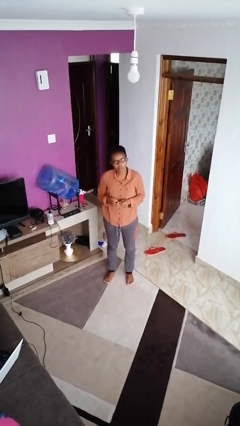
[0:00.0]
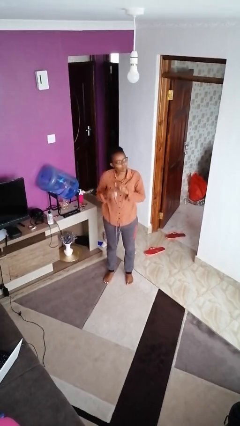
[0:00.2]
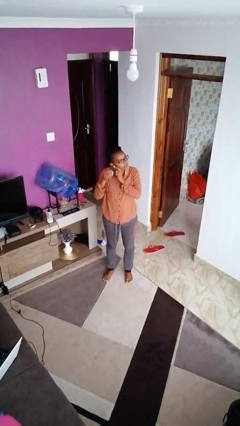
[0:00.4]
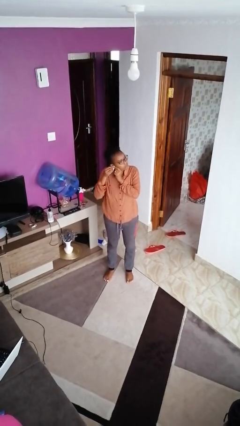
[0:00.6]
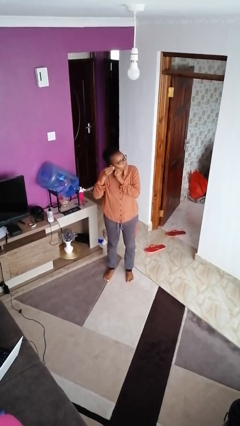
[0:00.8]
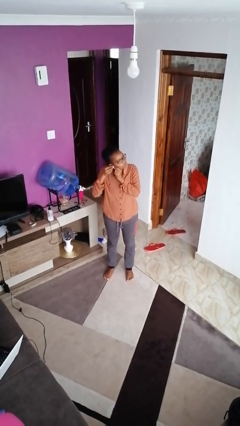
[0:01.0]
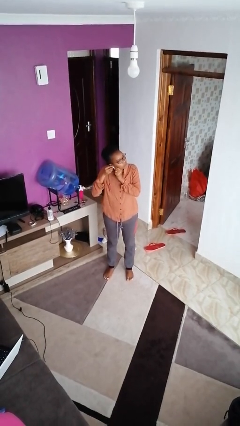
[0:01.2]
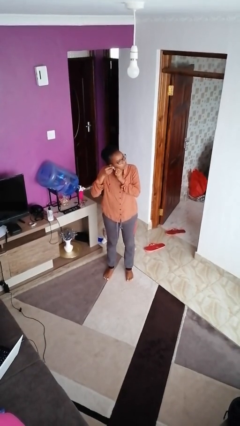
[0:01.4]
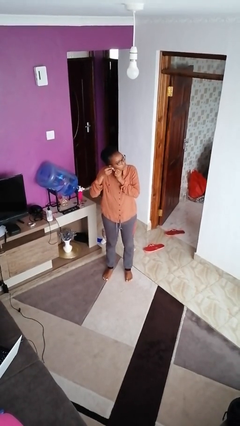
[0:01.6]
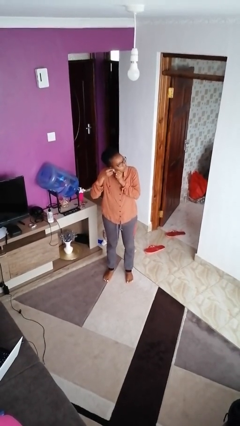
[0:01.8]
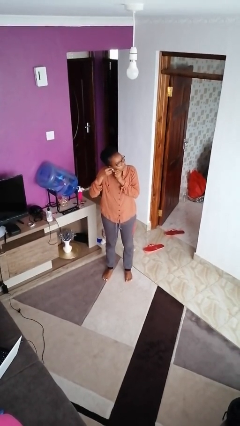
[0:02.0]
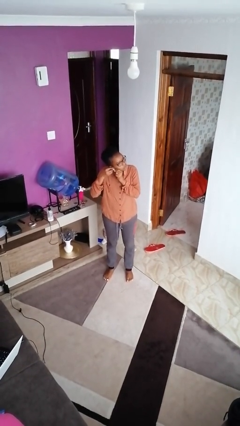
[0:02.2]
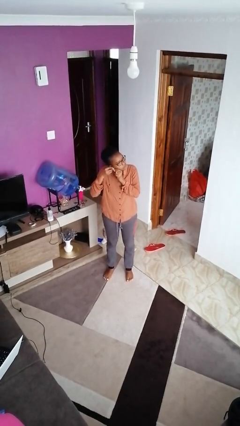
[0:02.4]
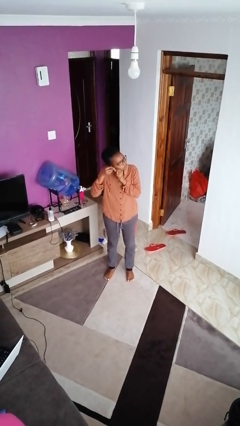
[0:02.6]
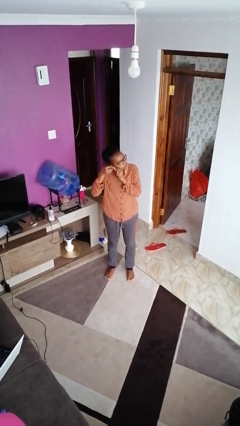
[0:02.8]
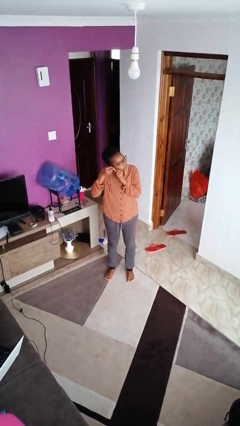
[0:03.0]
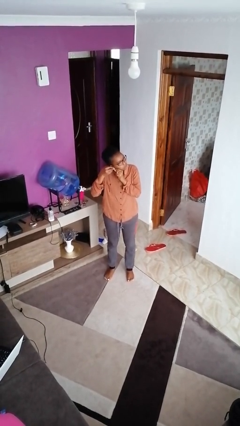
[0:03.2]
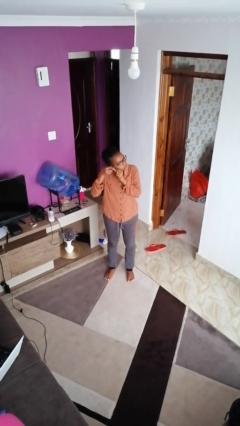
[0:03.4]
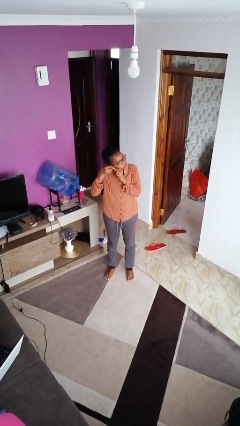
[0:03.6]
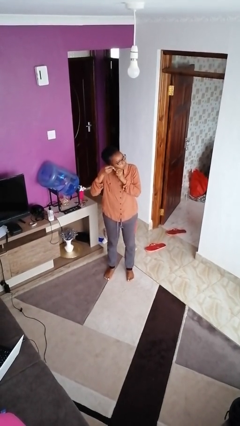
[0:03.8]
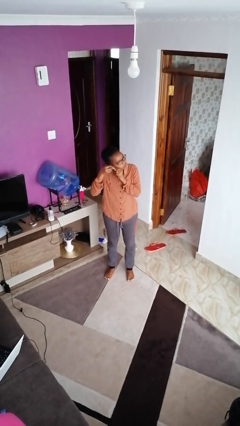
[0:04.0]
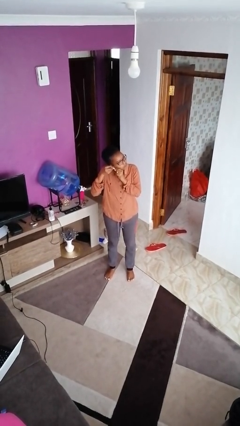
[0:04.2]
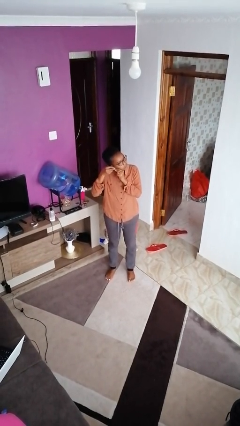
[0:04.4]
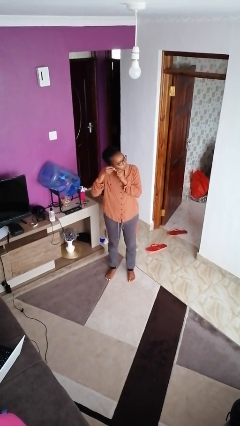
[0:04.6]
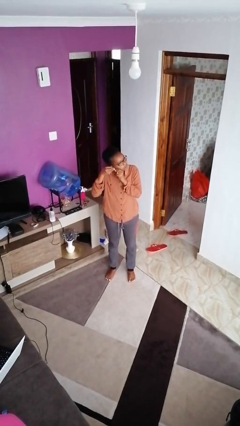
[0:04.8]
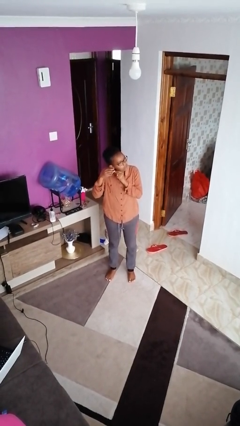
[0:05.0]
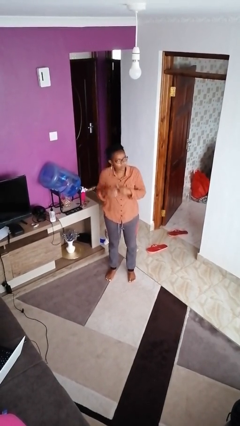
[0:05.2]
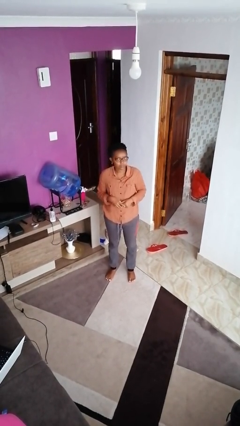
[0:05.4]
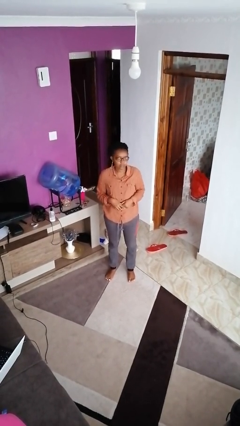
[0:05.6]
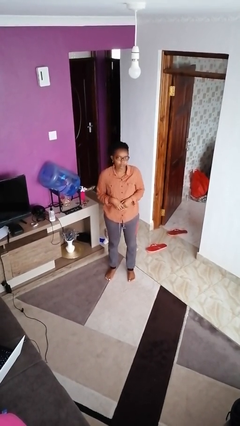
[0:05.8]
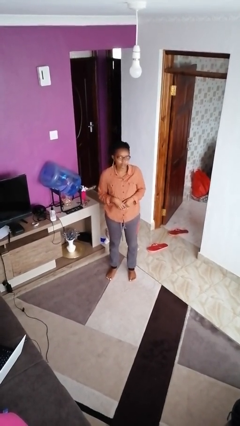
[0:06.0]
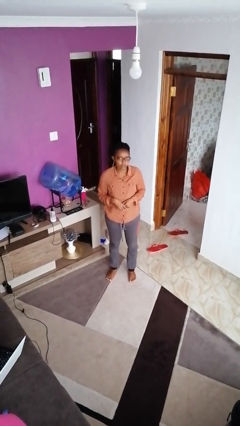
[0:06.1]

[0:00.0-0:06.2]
person puts on earrings

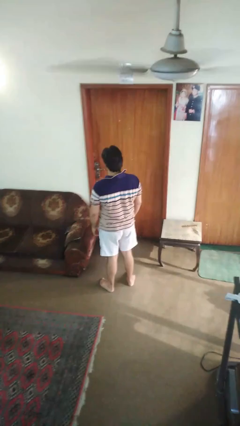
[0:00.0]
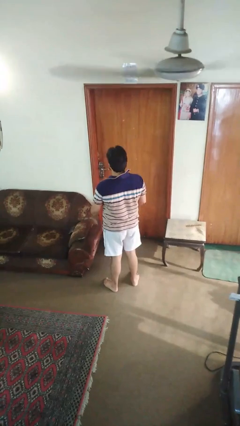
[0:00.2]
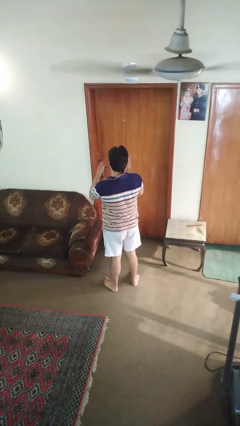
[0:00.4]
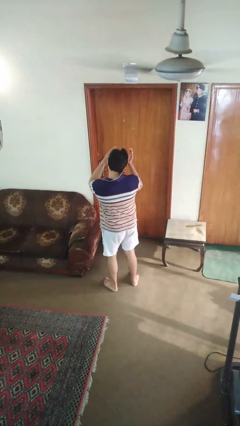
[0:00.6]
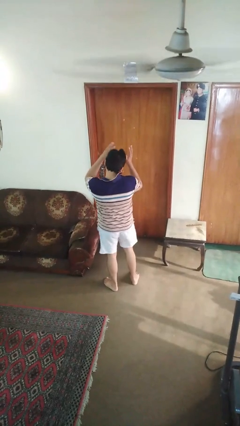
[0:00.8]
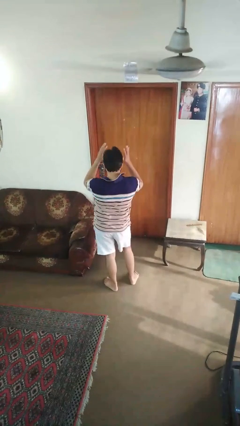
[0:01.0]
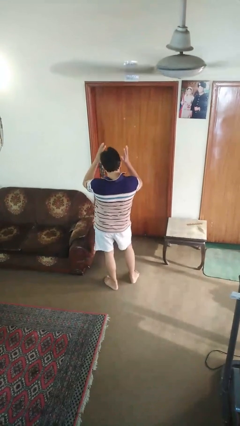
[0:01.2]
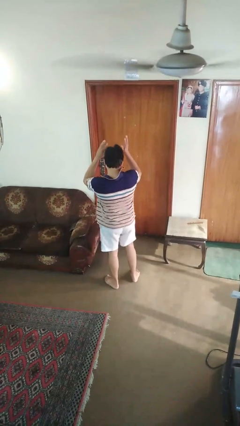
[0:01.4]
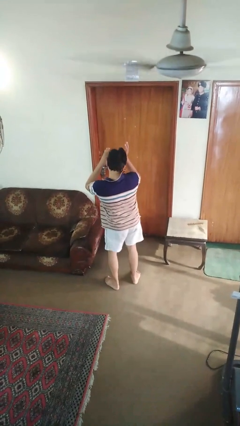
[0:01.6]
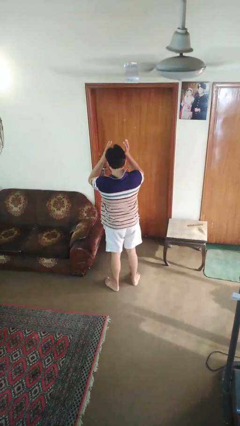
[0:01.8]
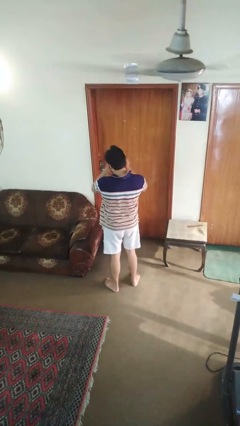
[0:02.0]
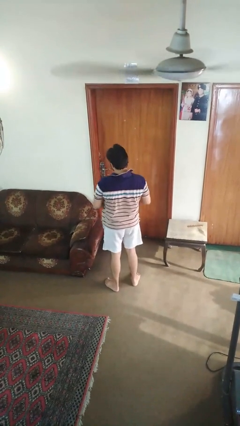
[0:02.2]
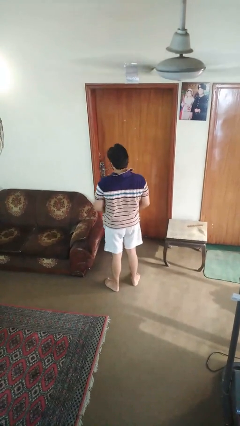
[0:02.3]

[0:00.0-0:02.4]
person dances in place

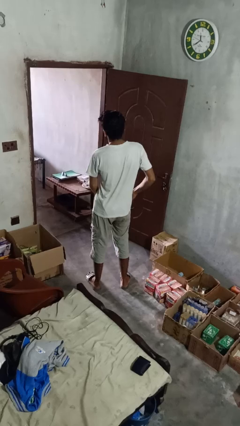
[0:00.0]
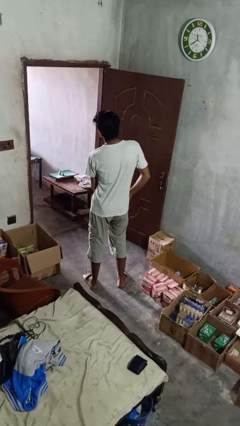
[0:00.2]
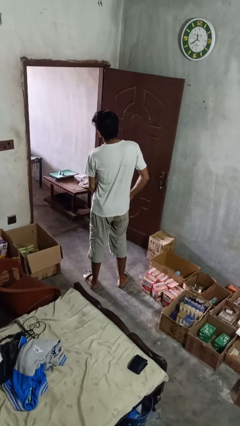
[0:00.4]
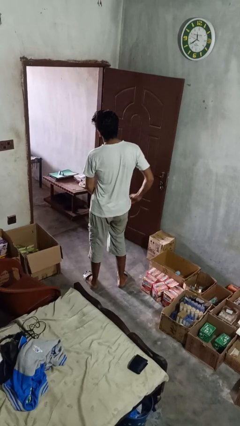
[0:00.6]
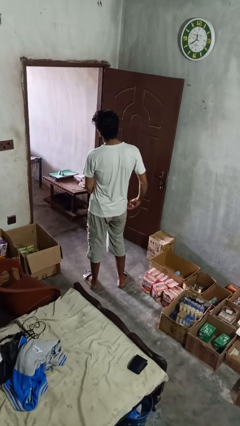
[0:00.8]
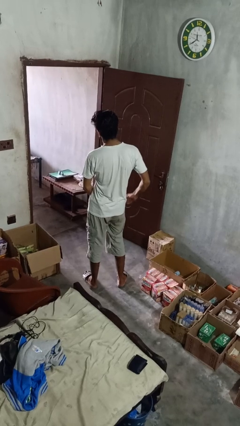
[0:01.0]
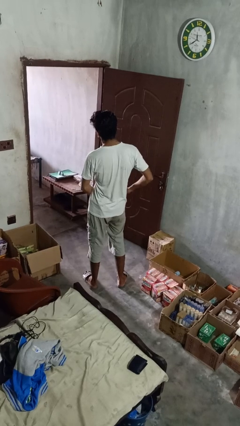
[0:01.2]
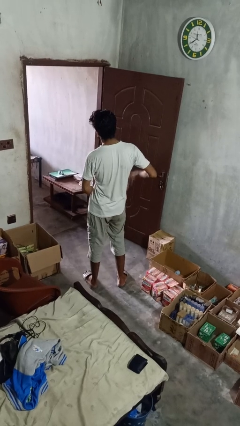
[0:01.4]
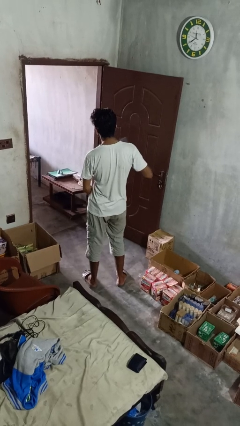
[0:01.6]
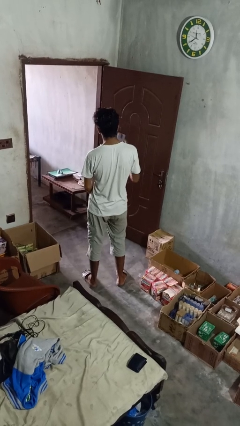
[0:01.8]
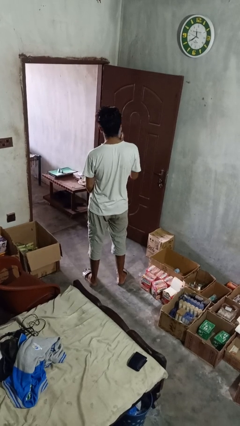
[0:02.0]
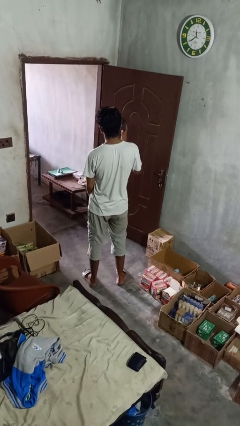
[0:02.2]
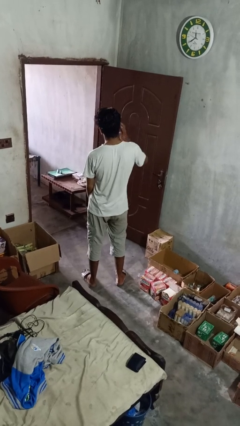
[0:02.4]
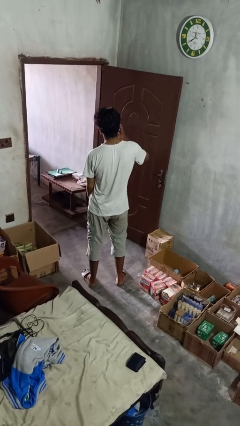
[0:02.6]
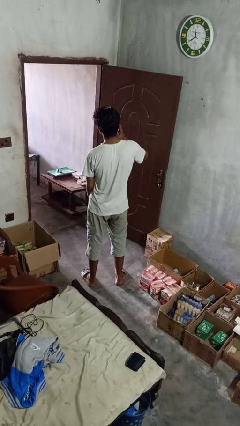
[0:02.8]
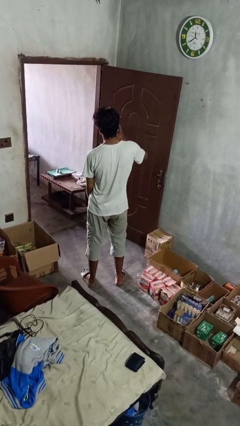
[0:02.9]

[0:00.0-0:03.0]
person takes phone from pocket

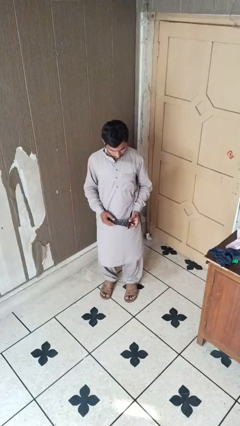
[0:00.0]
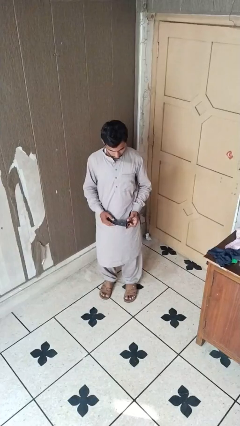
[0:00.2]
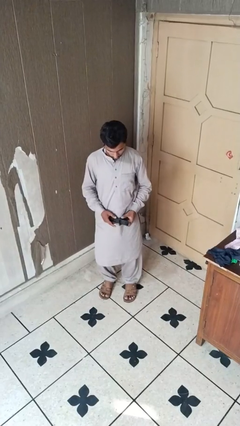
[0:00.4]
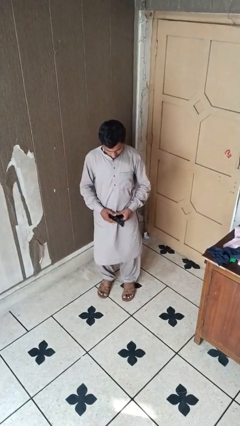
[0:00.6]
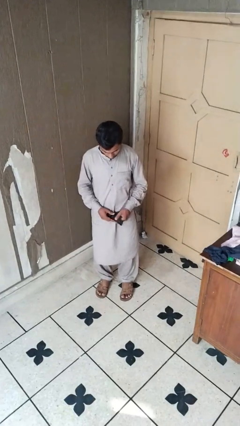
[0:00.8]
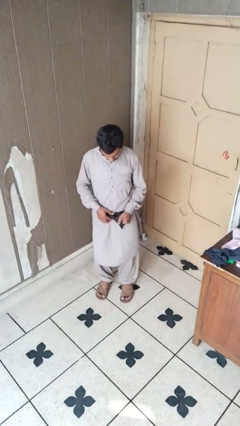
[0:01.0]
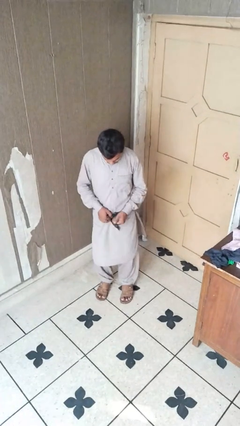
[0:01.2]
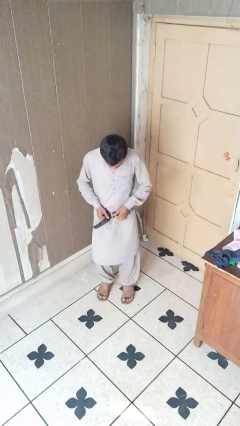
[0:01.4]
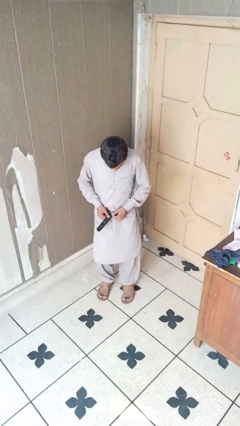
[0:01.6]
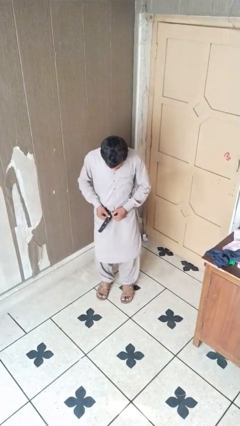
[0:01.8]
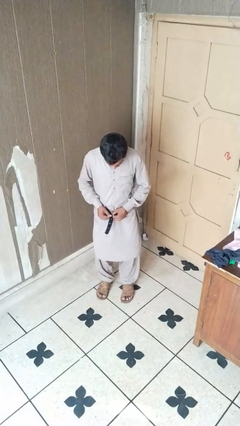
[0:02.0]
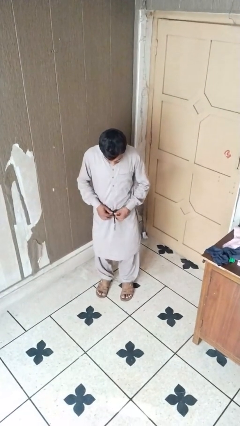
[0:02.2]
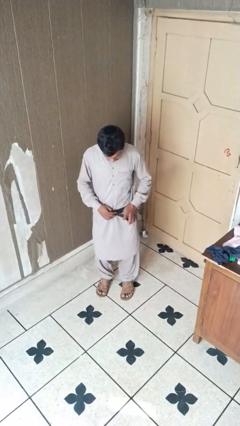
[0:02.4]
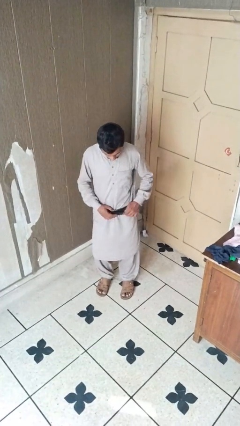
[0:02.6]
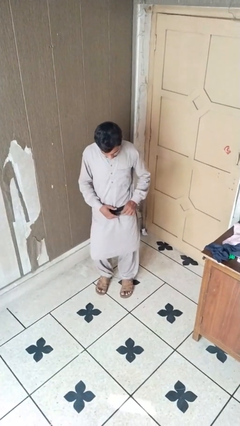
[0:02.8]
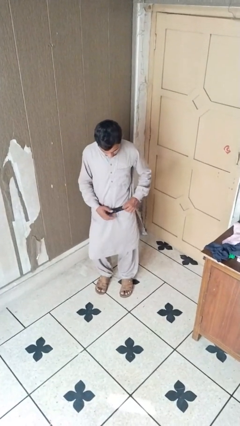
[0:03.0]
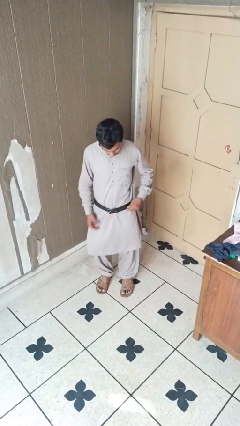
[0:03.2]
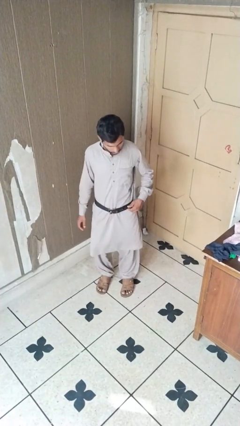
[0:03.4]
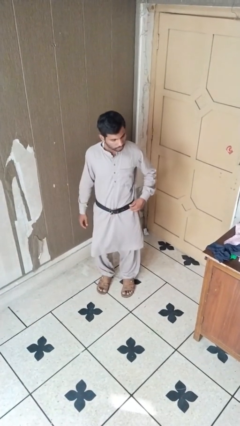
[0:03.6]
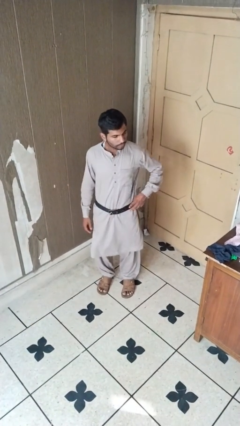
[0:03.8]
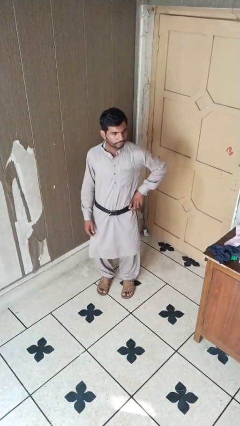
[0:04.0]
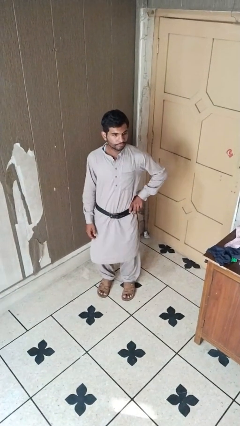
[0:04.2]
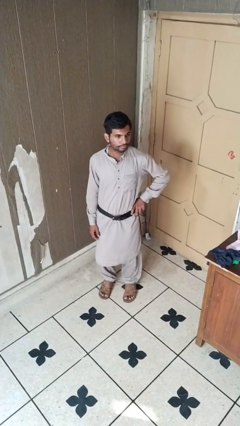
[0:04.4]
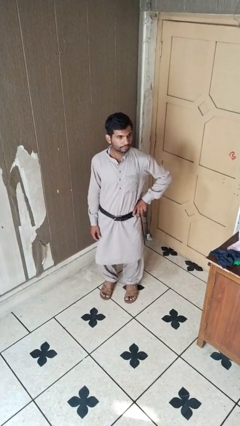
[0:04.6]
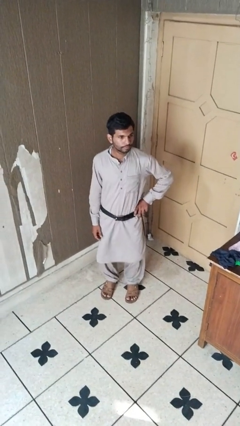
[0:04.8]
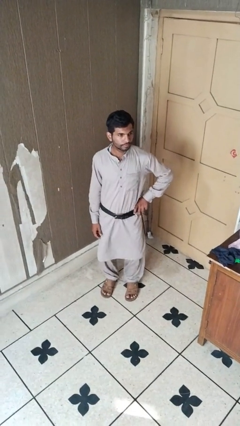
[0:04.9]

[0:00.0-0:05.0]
person puts on belt

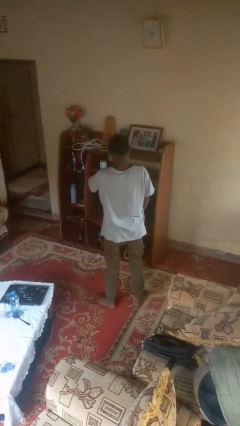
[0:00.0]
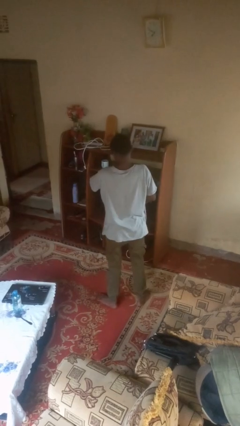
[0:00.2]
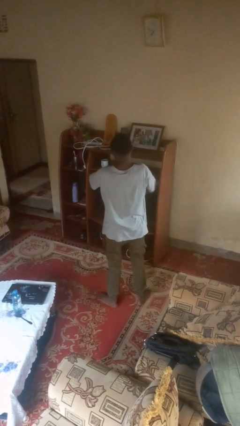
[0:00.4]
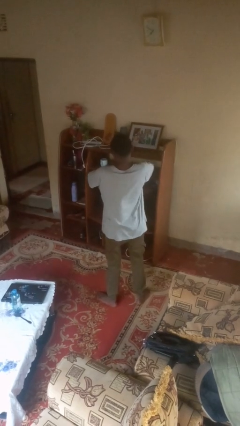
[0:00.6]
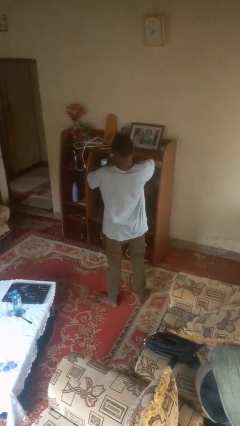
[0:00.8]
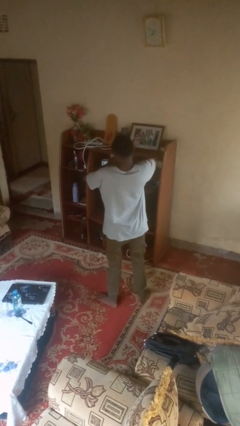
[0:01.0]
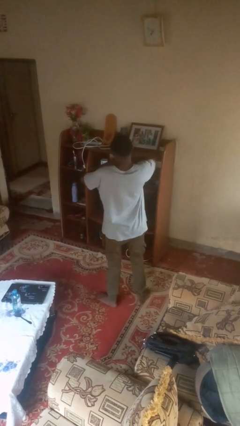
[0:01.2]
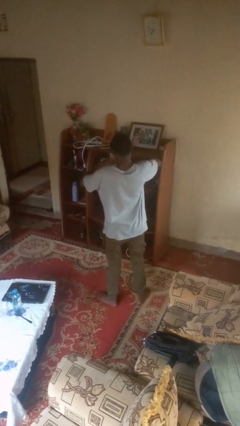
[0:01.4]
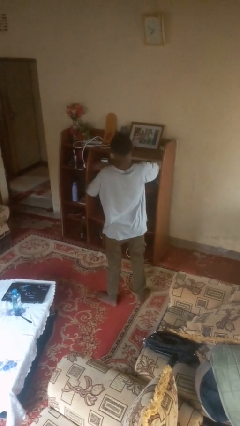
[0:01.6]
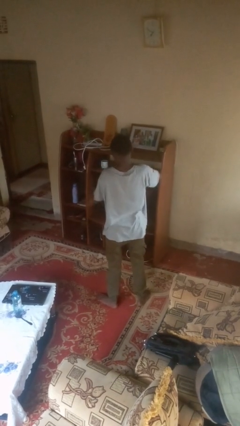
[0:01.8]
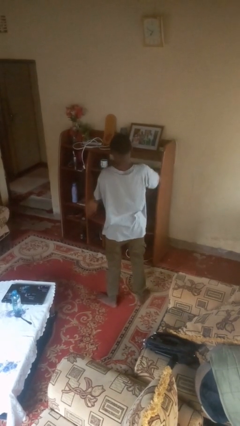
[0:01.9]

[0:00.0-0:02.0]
person takes off wristwatch
